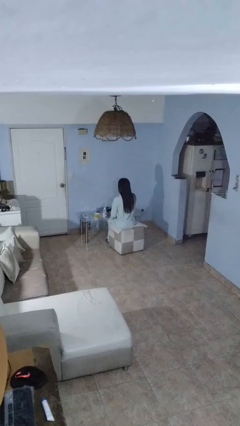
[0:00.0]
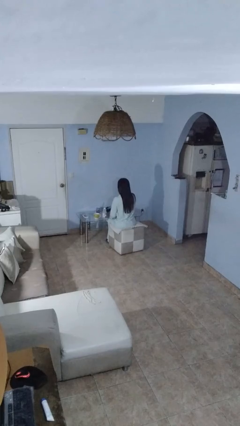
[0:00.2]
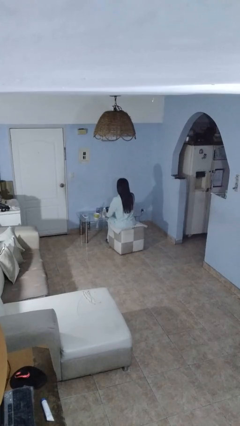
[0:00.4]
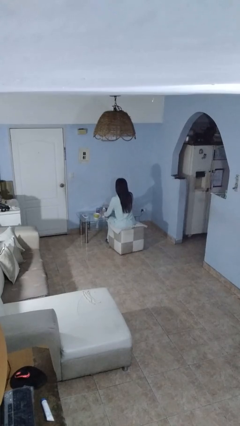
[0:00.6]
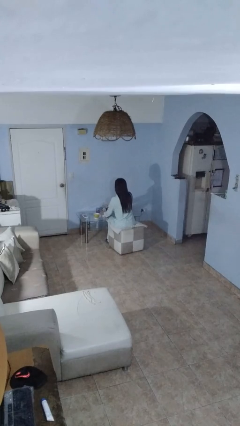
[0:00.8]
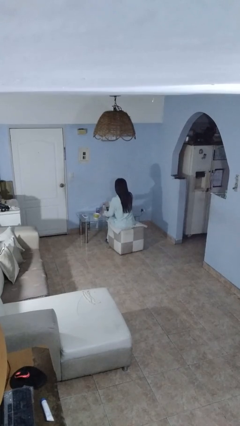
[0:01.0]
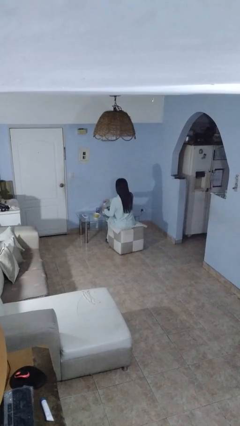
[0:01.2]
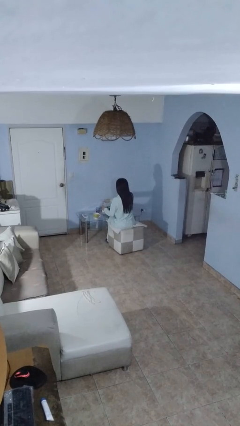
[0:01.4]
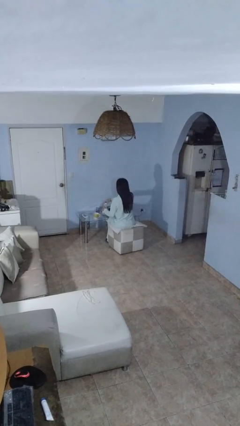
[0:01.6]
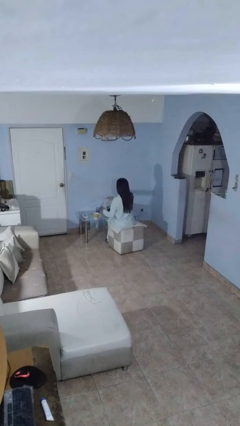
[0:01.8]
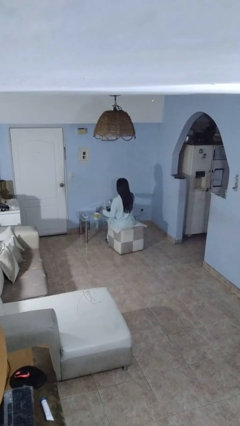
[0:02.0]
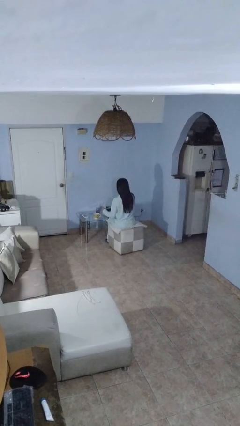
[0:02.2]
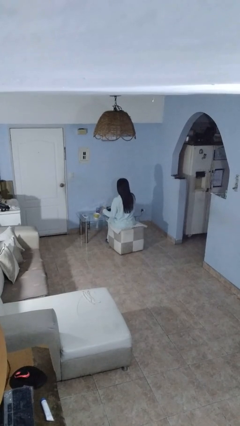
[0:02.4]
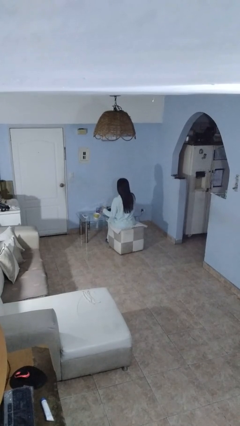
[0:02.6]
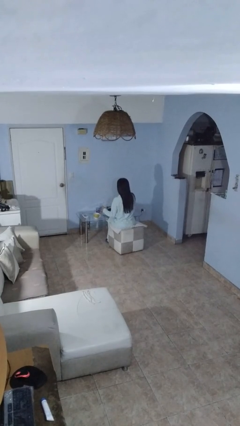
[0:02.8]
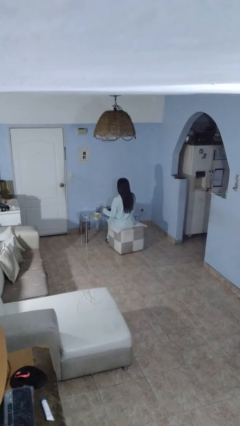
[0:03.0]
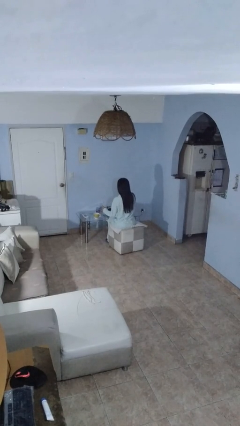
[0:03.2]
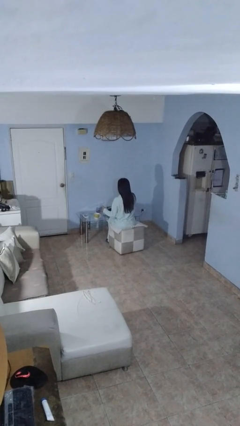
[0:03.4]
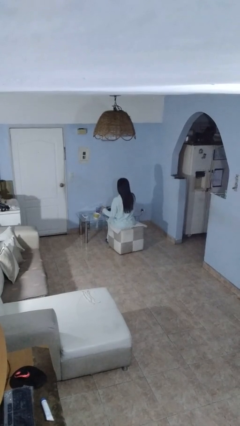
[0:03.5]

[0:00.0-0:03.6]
person unscrews lid from bottle

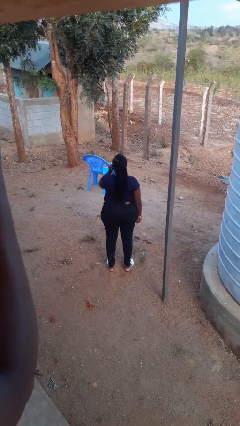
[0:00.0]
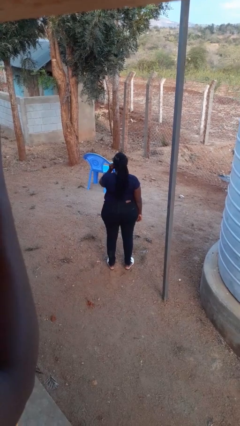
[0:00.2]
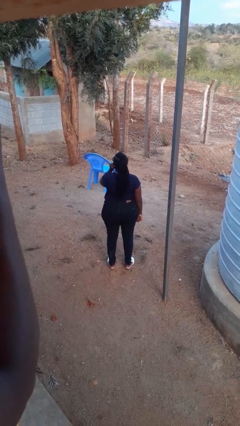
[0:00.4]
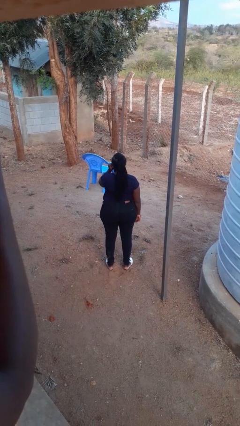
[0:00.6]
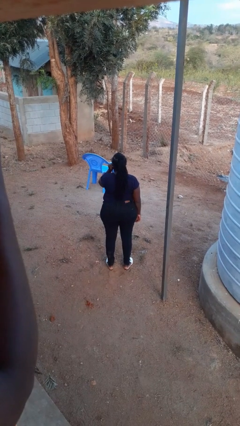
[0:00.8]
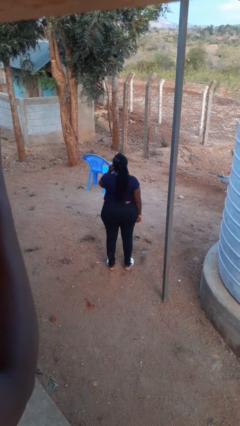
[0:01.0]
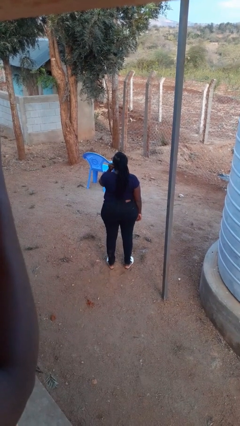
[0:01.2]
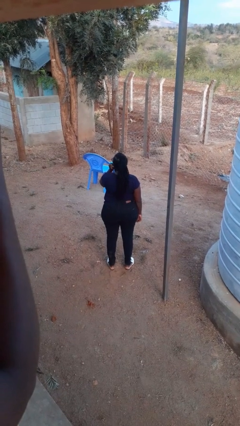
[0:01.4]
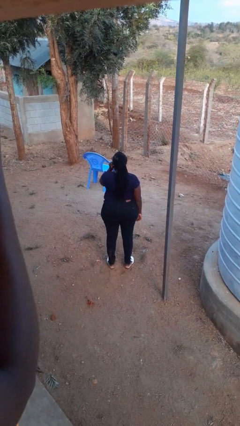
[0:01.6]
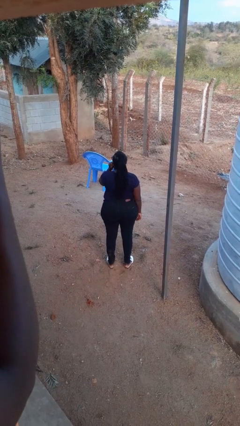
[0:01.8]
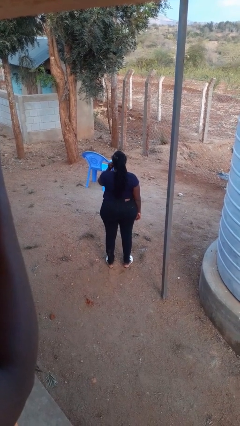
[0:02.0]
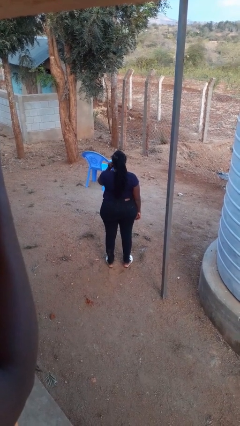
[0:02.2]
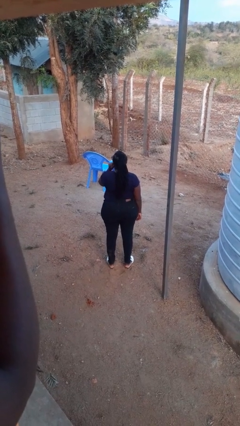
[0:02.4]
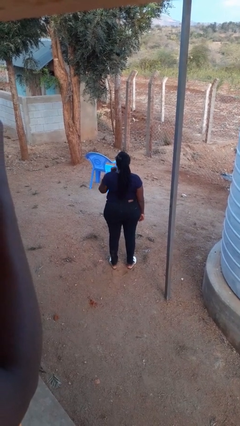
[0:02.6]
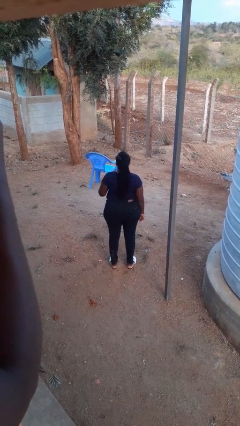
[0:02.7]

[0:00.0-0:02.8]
person touches earlobe

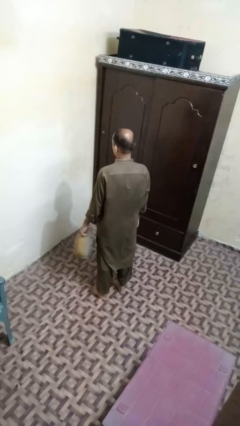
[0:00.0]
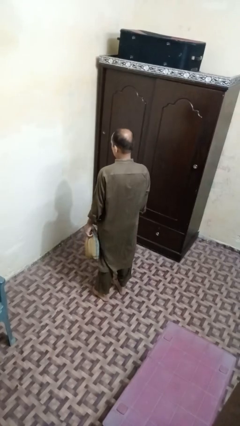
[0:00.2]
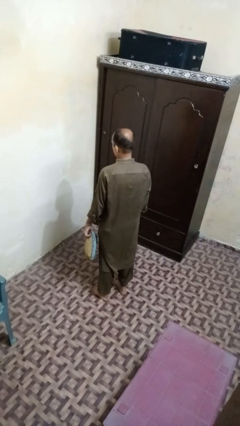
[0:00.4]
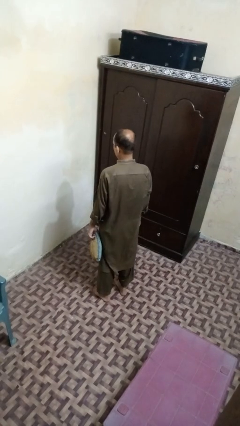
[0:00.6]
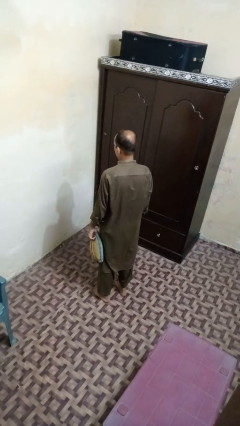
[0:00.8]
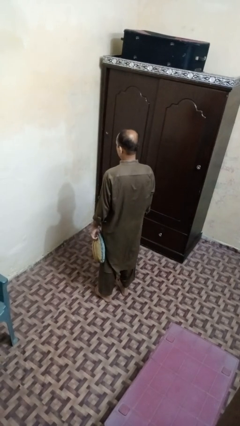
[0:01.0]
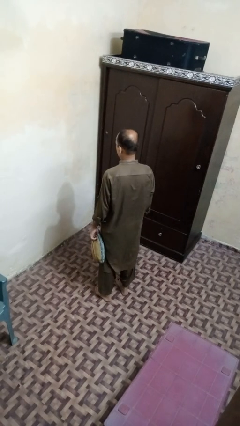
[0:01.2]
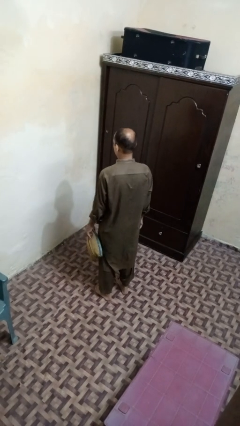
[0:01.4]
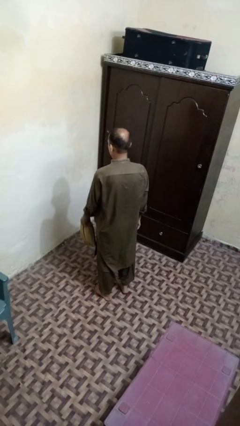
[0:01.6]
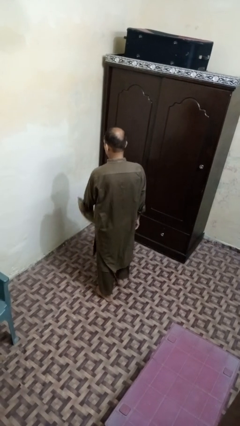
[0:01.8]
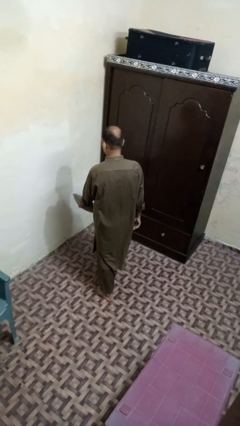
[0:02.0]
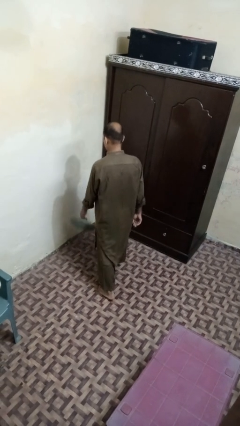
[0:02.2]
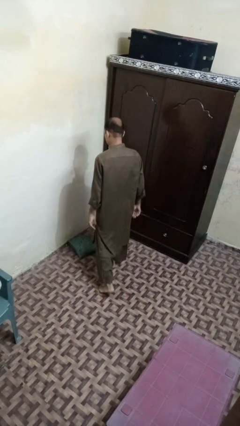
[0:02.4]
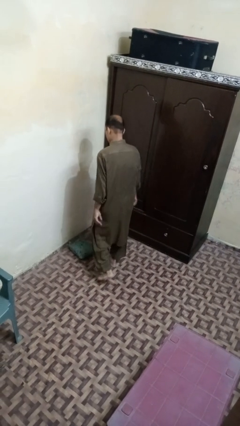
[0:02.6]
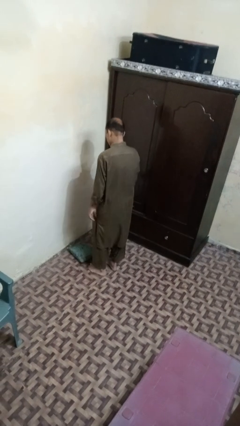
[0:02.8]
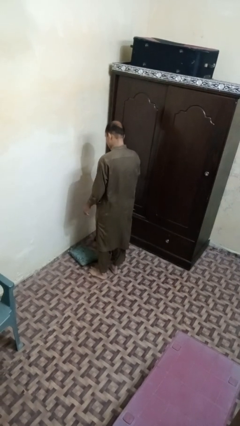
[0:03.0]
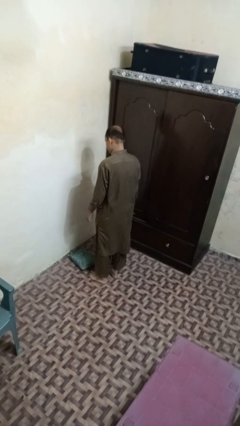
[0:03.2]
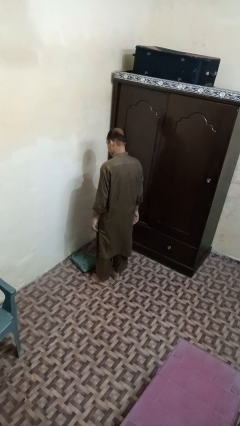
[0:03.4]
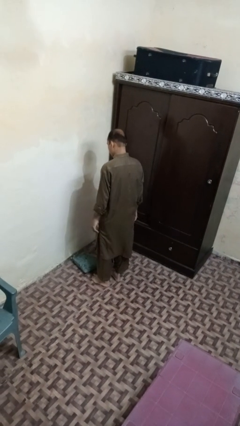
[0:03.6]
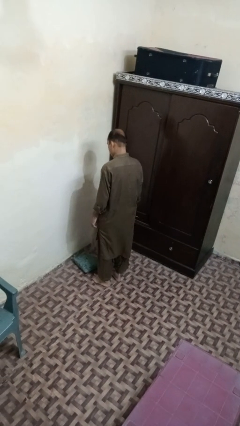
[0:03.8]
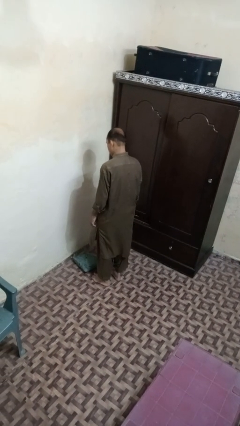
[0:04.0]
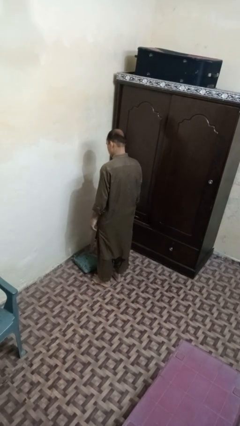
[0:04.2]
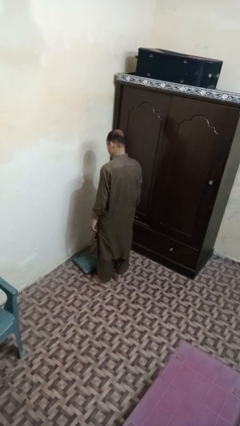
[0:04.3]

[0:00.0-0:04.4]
person throws object to ground

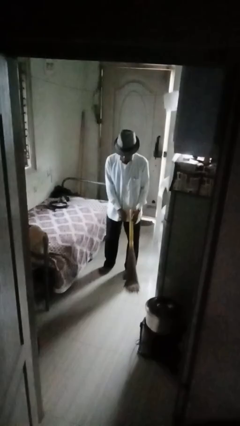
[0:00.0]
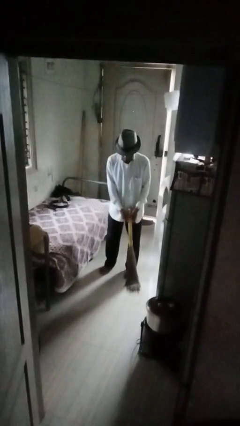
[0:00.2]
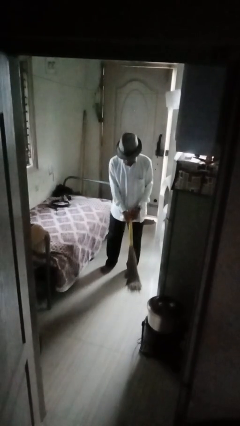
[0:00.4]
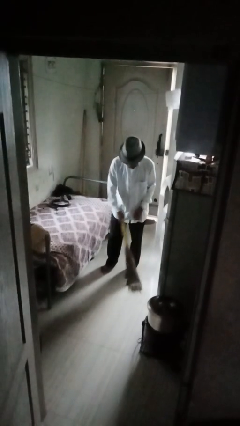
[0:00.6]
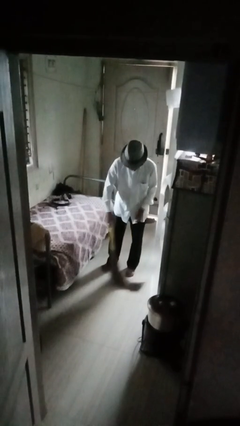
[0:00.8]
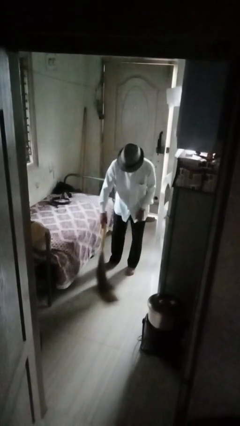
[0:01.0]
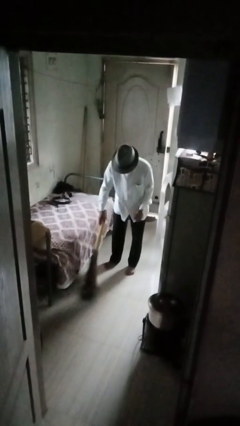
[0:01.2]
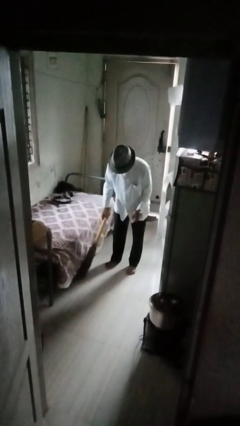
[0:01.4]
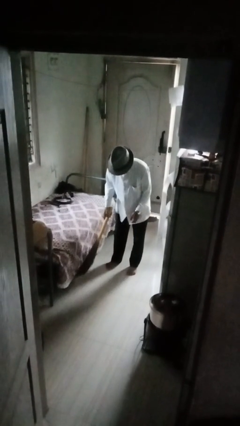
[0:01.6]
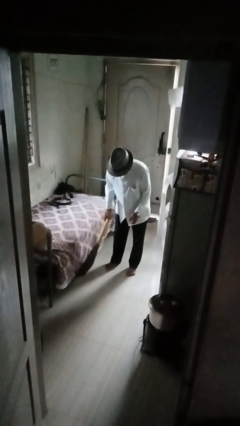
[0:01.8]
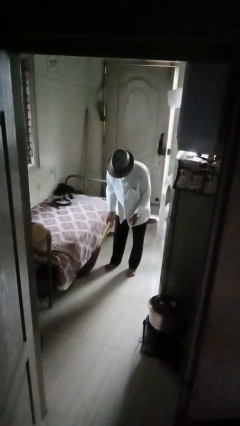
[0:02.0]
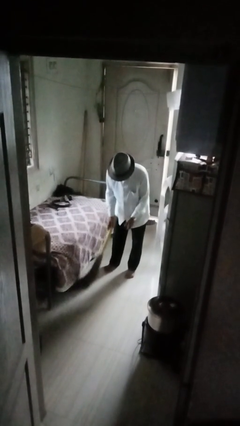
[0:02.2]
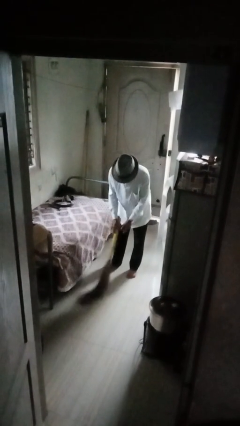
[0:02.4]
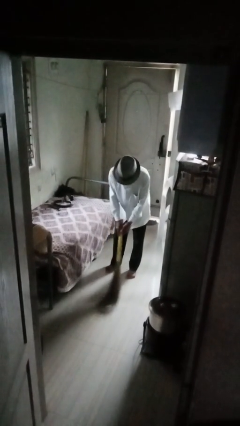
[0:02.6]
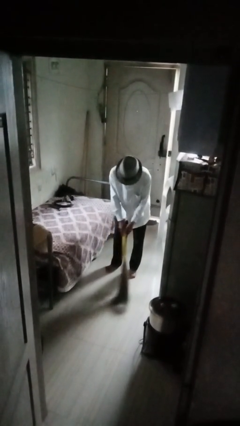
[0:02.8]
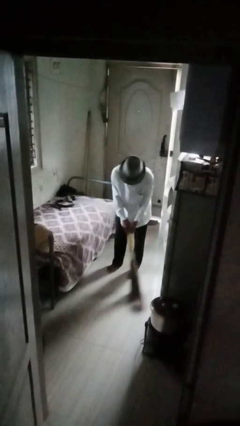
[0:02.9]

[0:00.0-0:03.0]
person sweeps floor

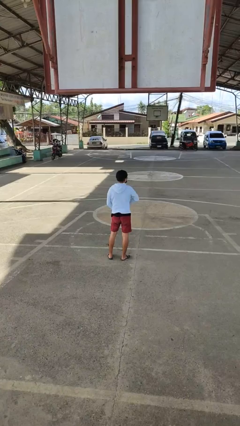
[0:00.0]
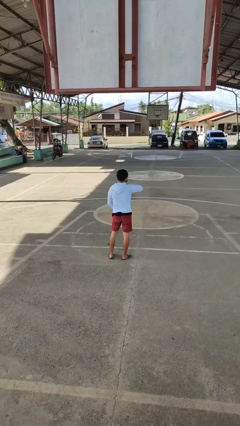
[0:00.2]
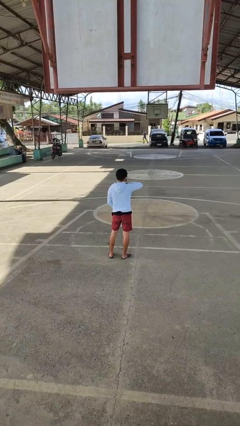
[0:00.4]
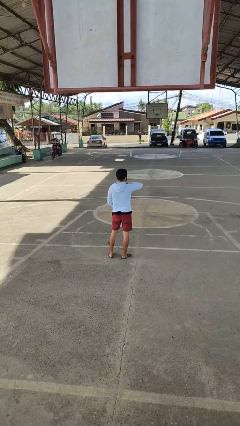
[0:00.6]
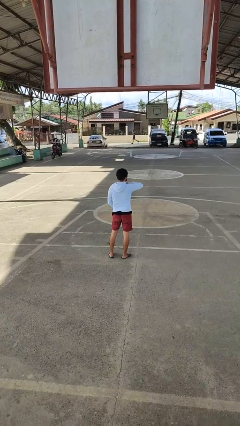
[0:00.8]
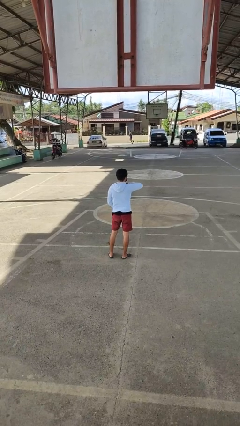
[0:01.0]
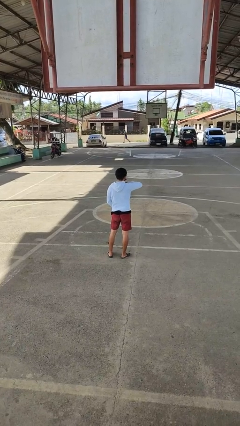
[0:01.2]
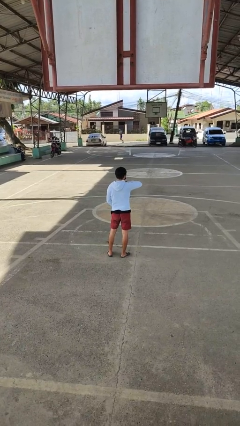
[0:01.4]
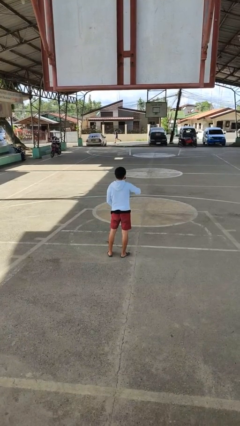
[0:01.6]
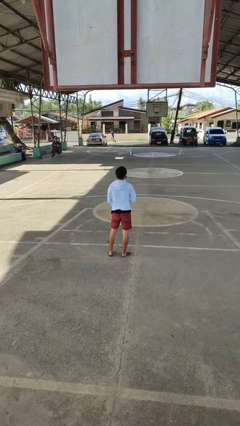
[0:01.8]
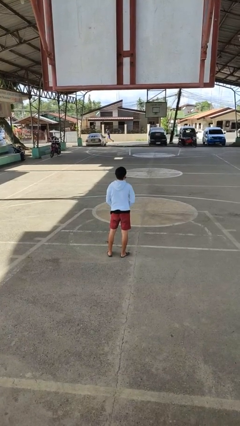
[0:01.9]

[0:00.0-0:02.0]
person zips up jacket

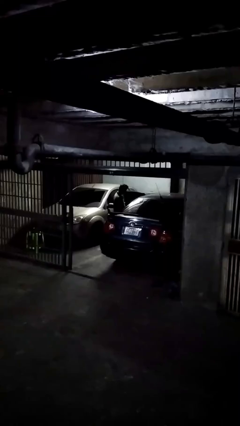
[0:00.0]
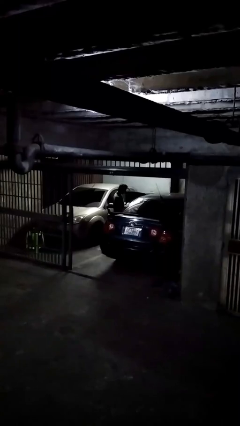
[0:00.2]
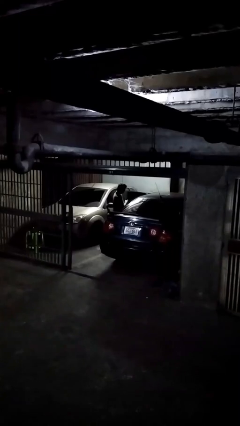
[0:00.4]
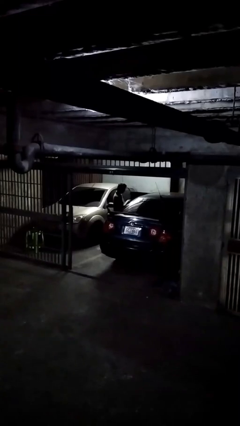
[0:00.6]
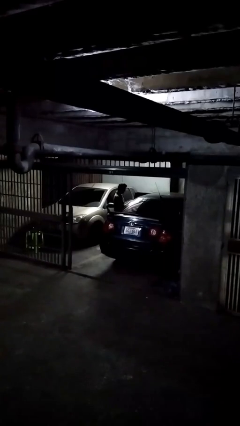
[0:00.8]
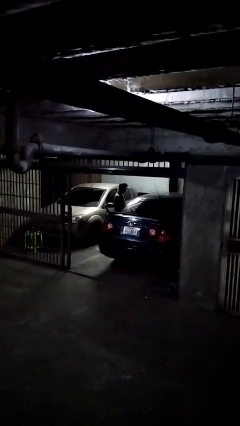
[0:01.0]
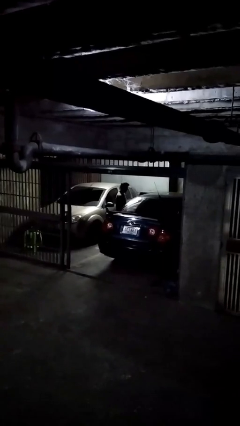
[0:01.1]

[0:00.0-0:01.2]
person closes car door

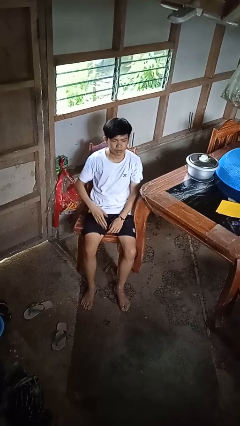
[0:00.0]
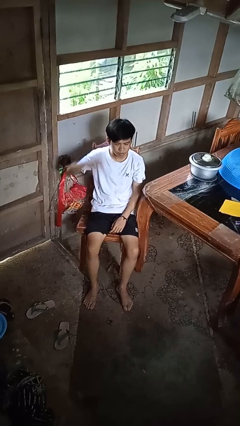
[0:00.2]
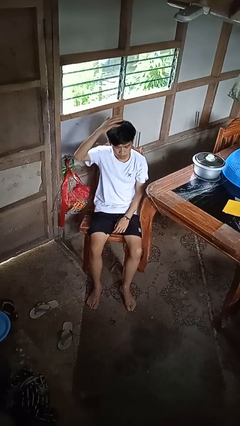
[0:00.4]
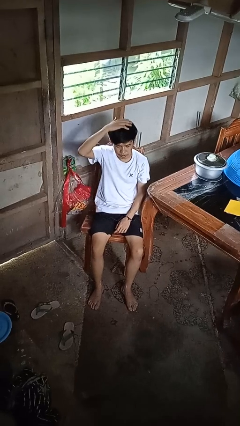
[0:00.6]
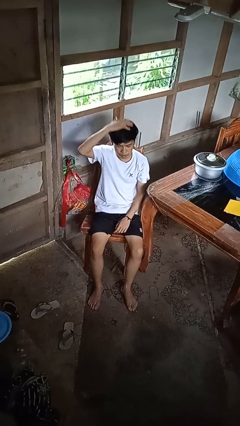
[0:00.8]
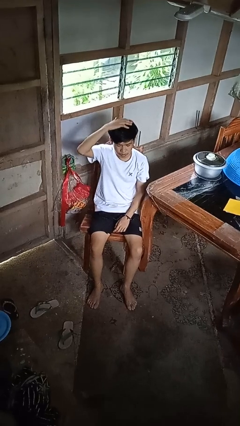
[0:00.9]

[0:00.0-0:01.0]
person pats head
